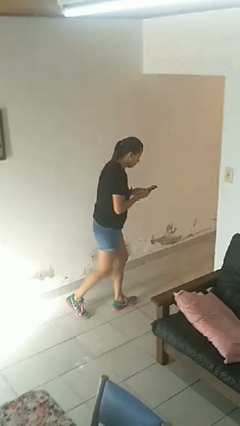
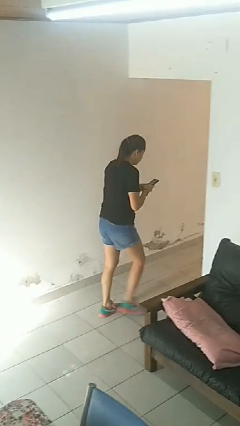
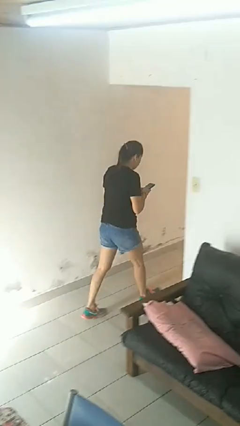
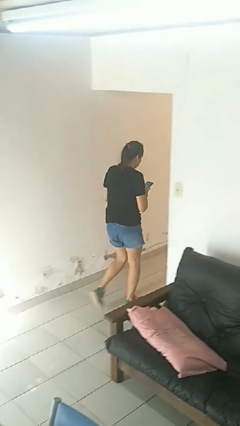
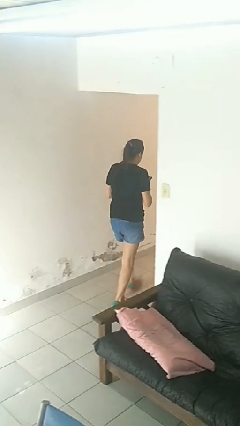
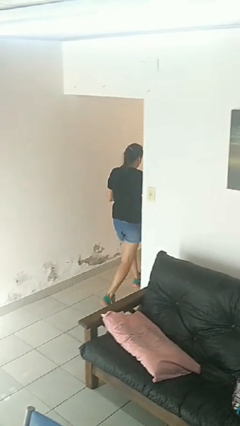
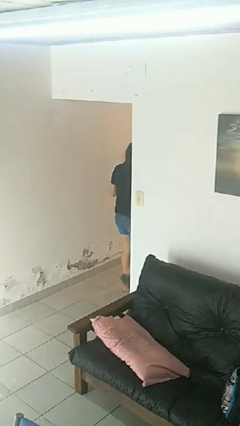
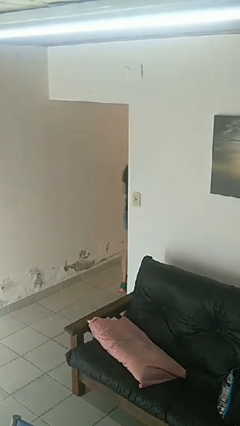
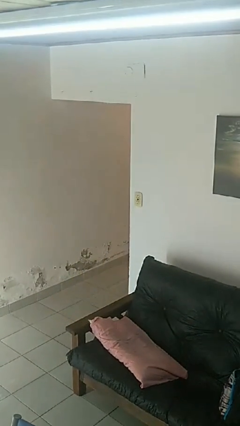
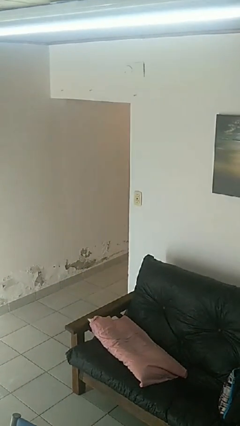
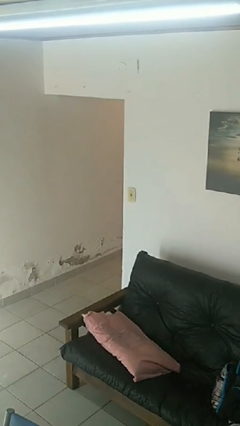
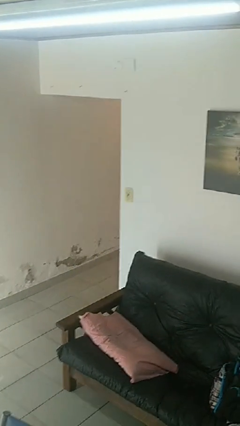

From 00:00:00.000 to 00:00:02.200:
person exits scene through structure

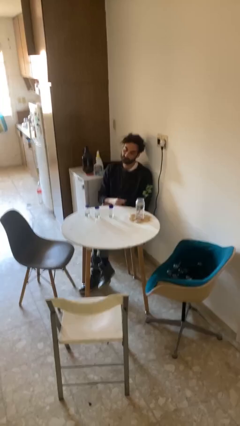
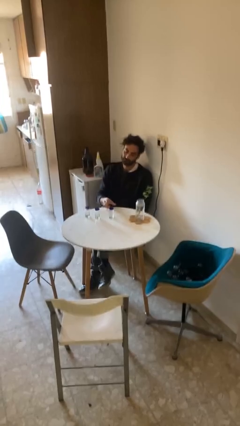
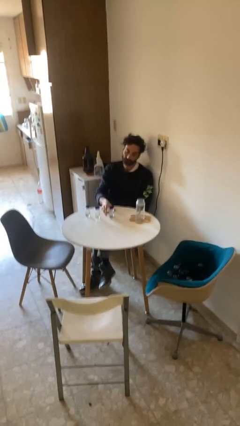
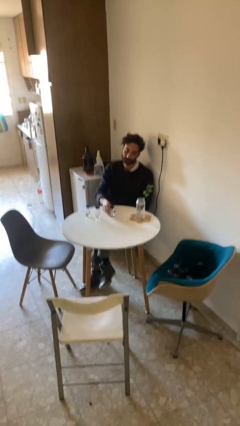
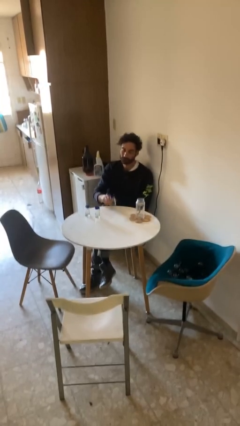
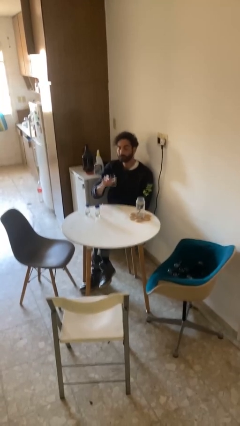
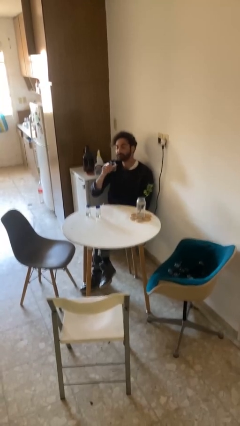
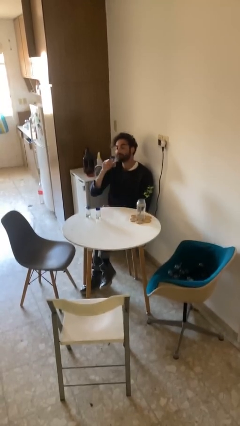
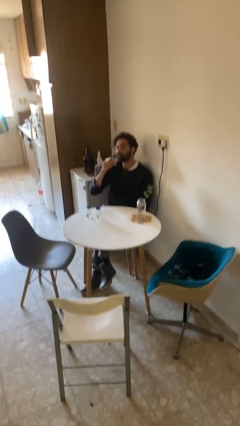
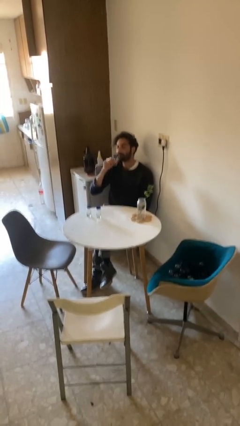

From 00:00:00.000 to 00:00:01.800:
person picks up object from table

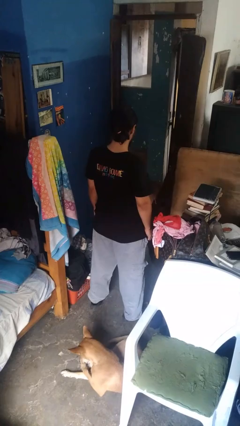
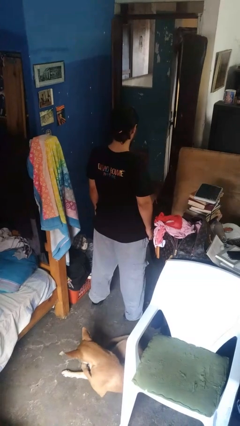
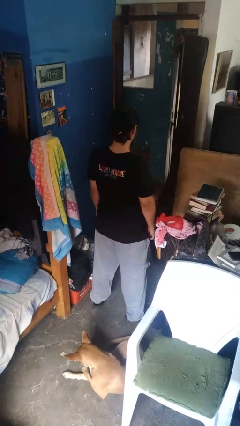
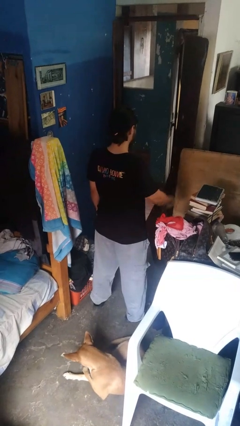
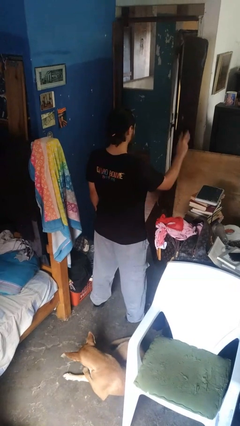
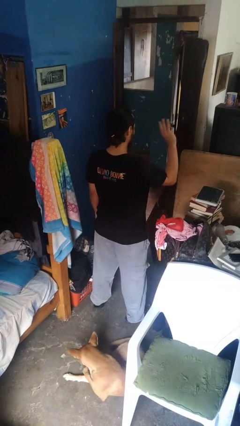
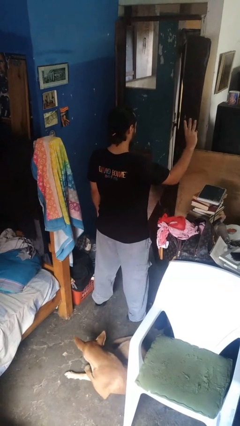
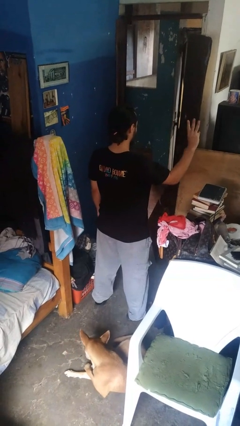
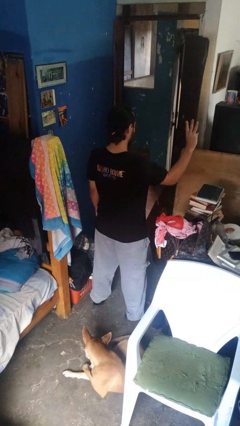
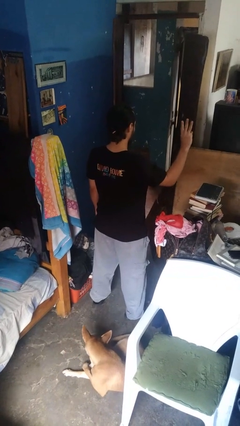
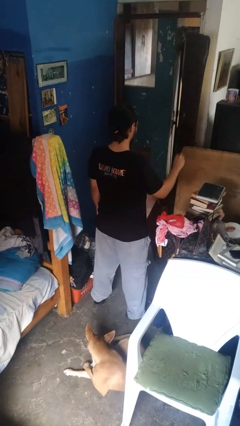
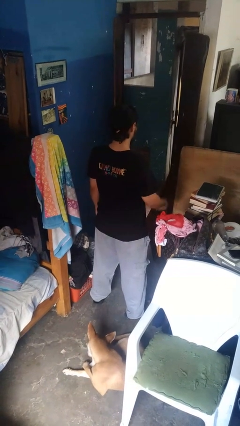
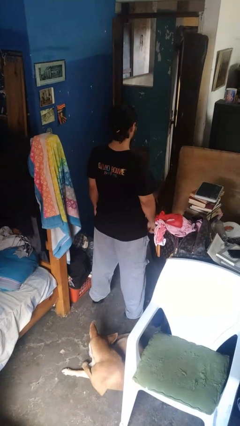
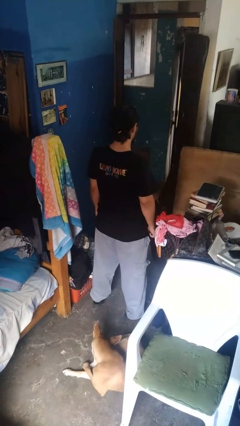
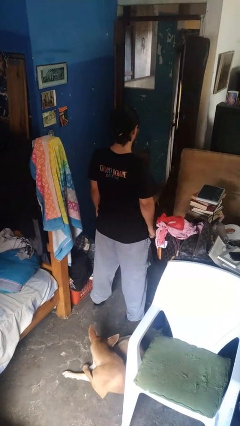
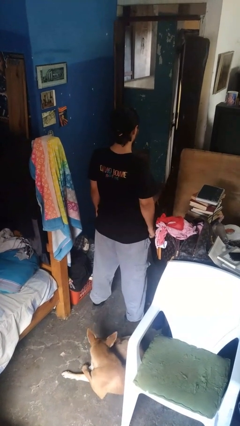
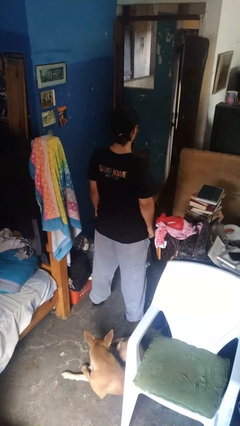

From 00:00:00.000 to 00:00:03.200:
person gestures number three

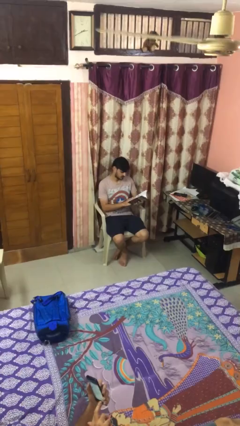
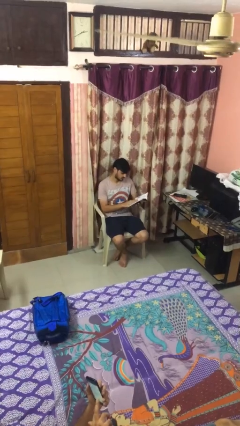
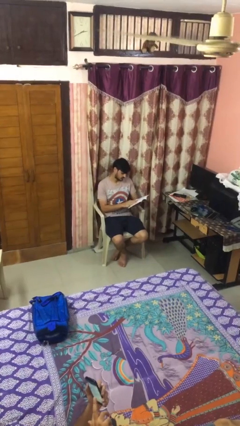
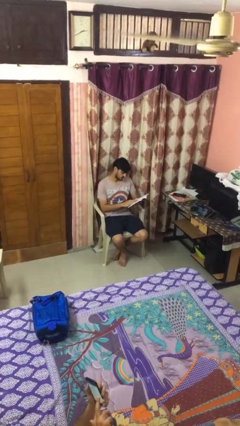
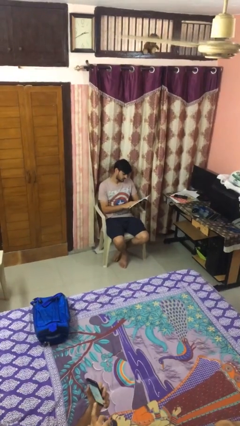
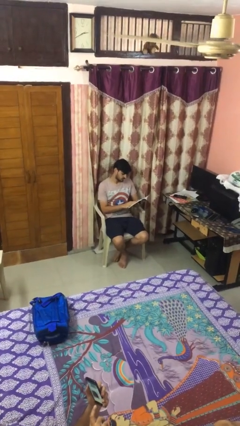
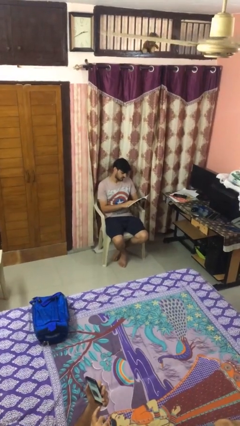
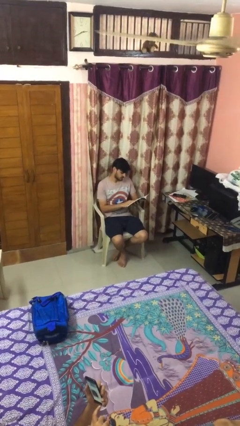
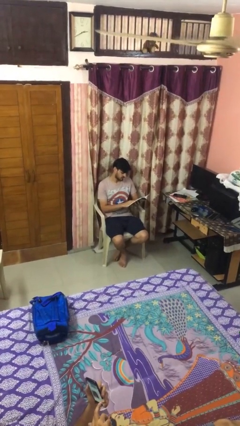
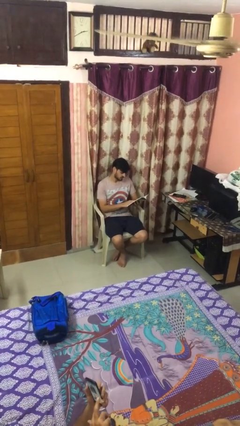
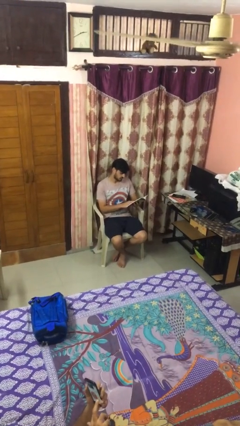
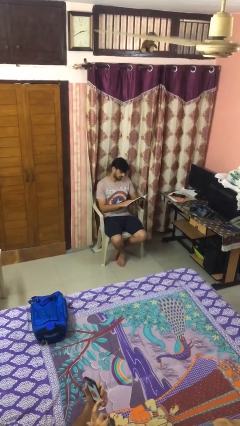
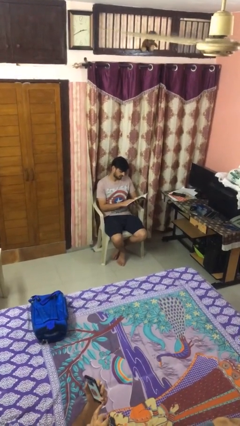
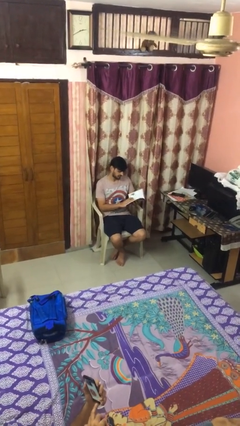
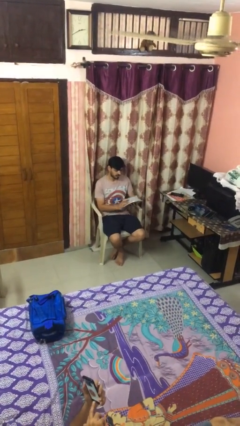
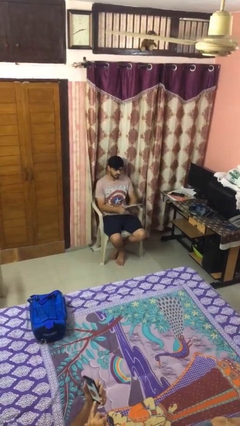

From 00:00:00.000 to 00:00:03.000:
person reads book

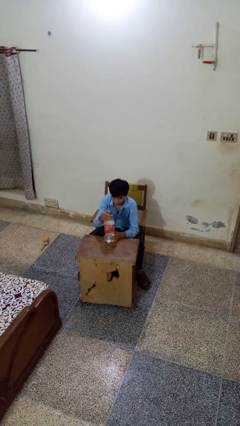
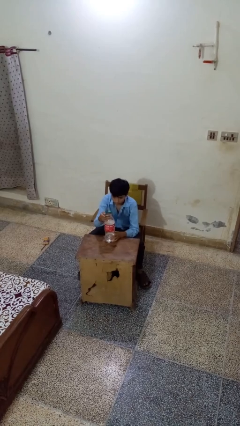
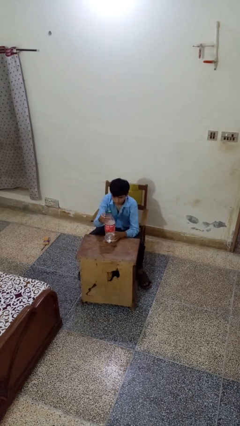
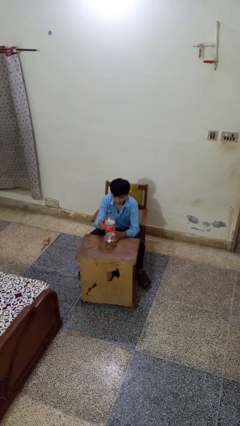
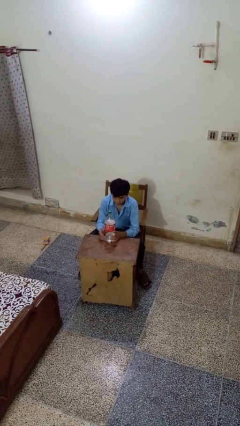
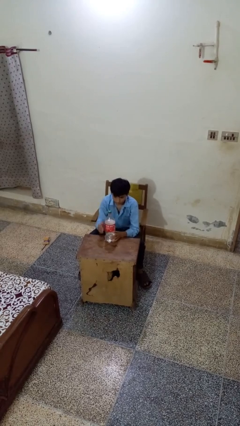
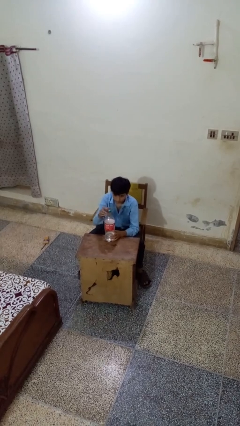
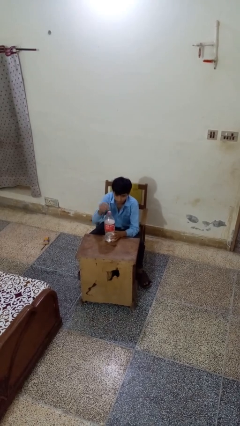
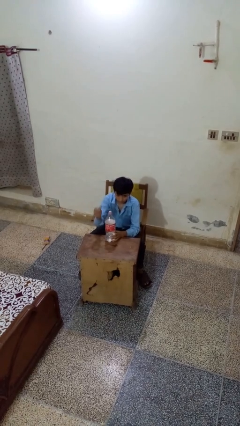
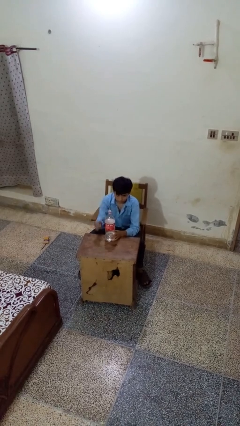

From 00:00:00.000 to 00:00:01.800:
person unscrews lid from bottle

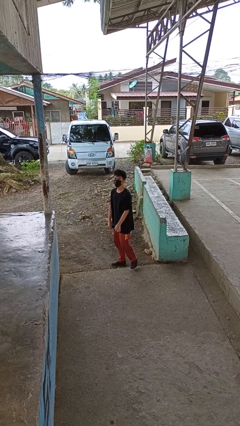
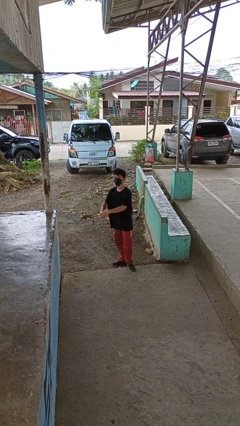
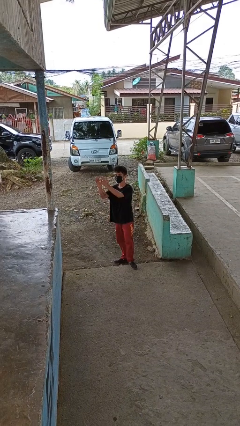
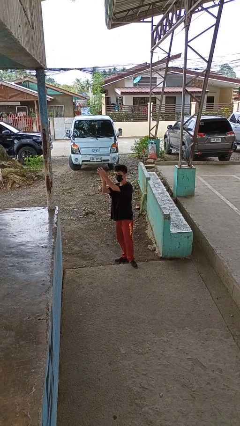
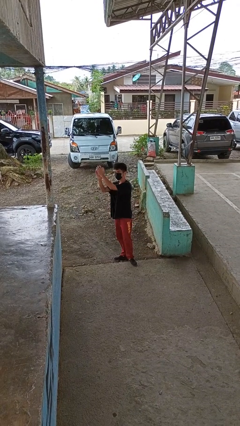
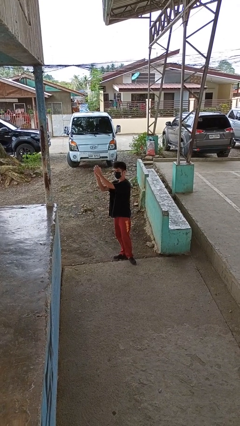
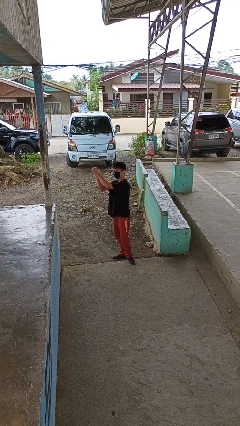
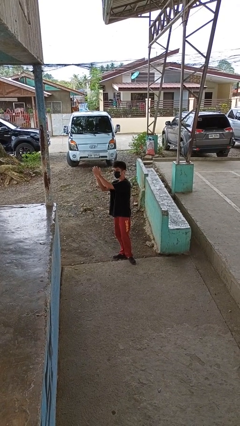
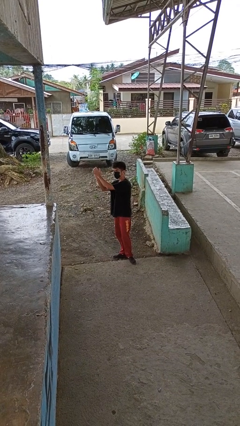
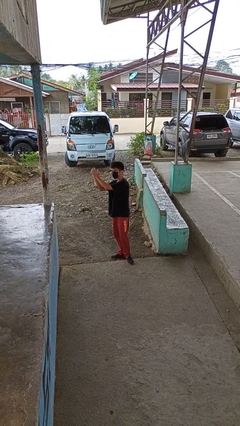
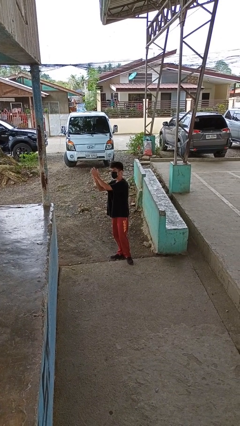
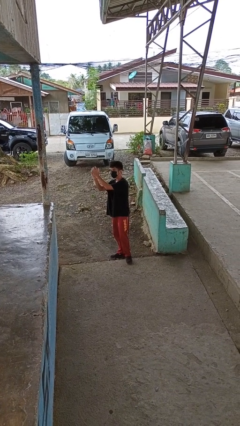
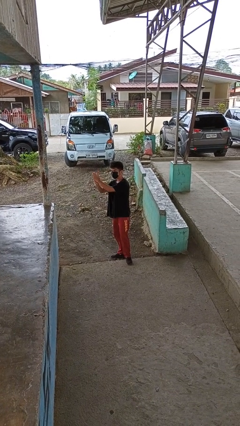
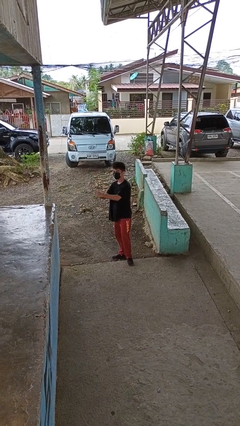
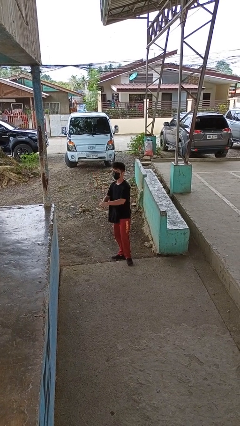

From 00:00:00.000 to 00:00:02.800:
person claps hands

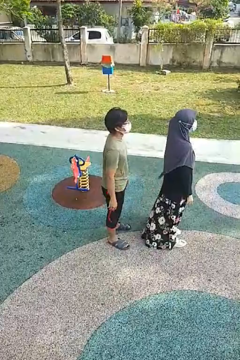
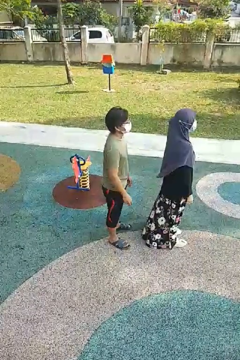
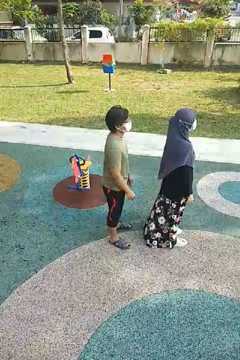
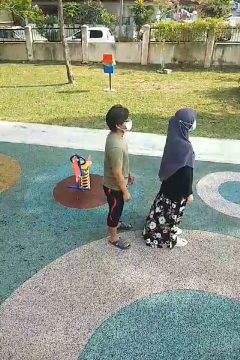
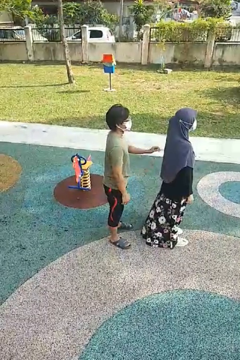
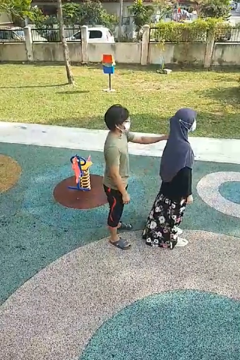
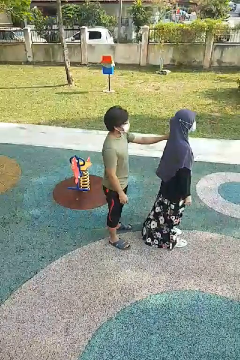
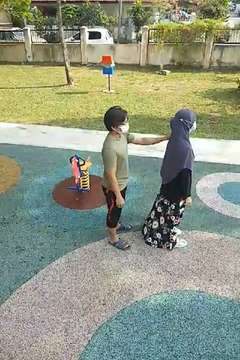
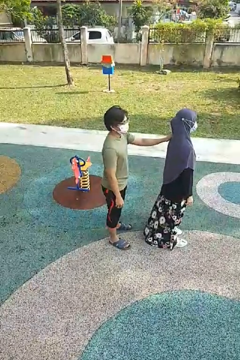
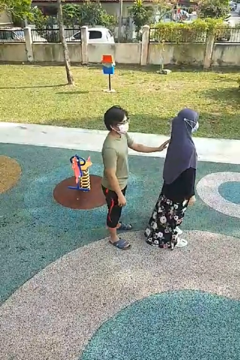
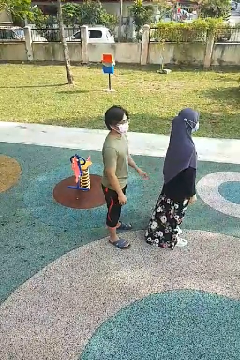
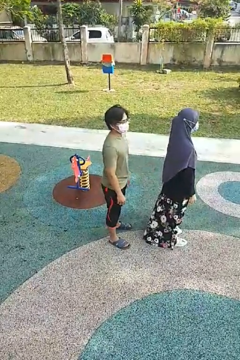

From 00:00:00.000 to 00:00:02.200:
person touches back of person

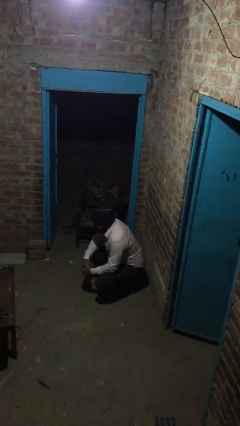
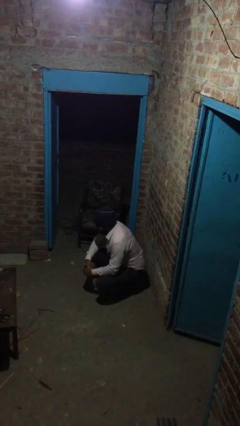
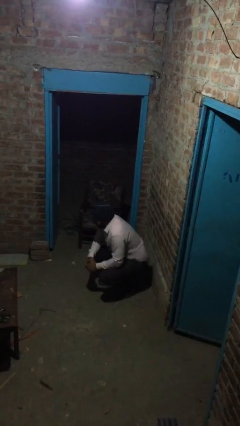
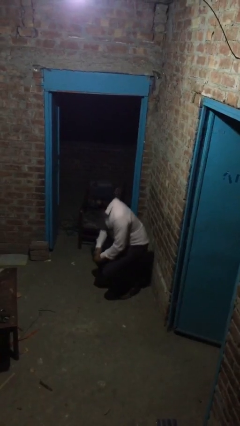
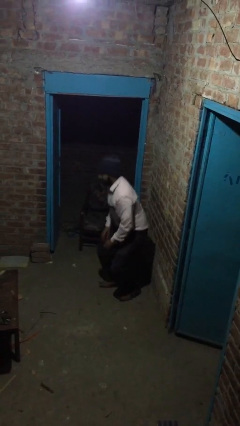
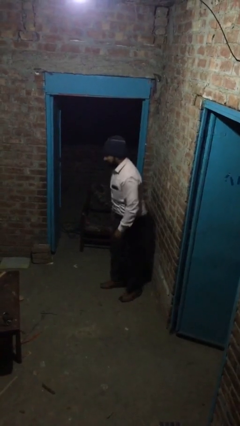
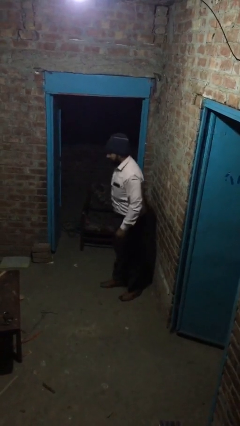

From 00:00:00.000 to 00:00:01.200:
person stands up
